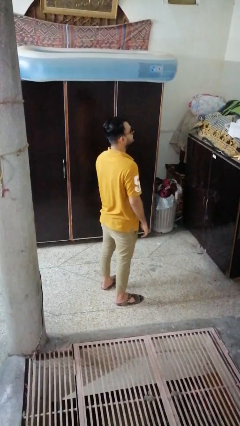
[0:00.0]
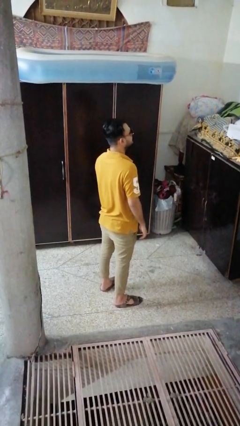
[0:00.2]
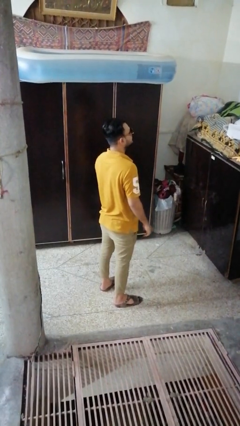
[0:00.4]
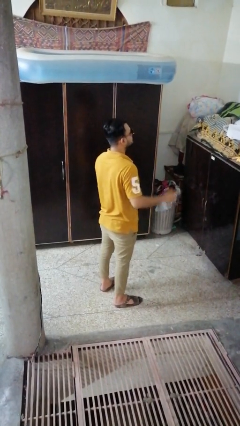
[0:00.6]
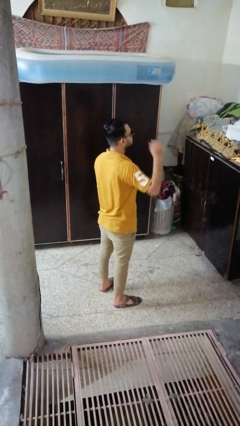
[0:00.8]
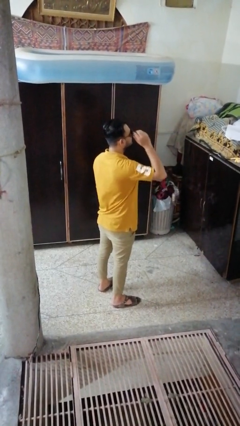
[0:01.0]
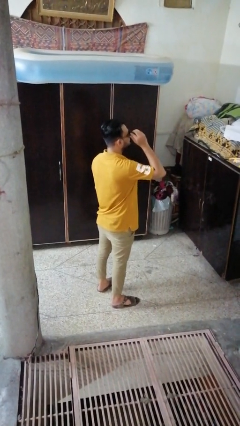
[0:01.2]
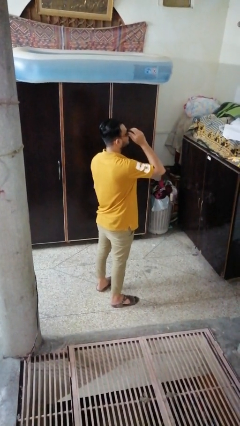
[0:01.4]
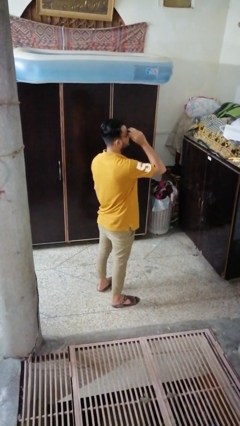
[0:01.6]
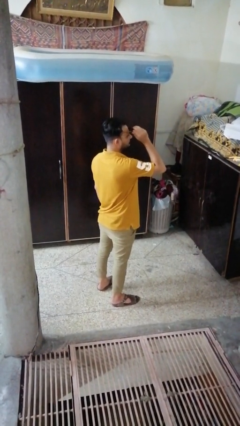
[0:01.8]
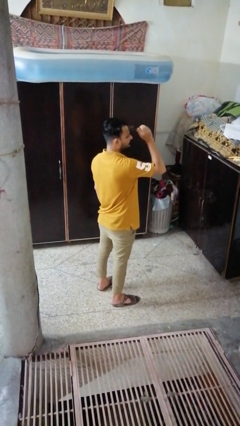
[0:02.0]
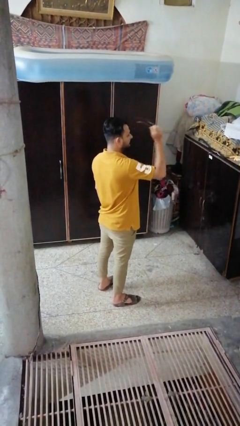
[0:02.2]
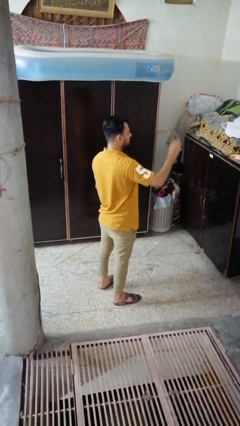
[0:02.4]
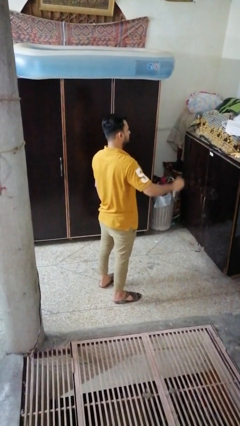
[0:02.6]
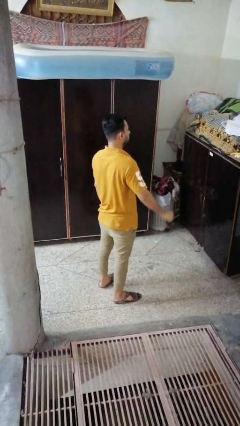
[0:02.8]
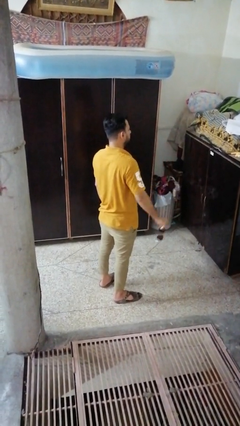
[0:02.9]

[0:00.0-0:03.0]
person takes off sunglasses

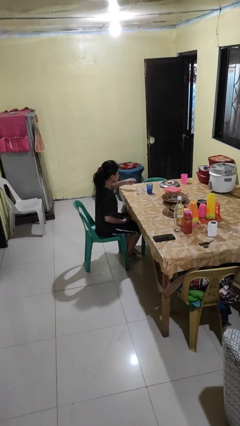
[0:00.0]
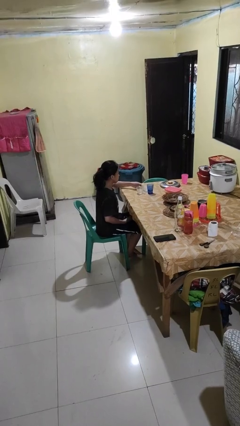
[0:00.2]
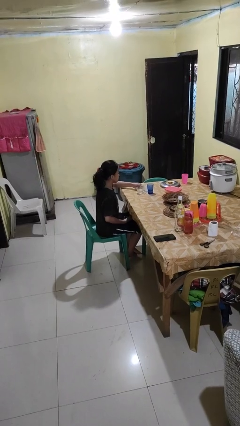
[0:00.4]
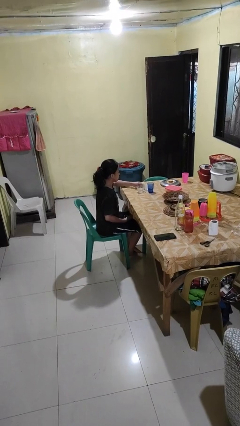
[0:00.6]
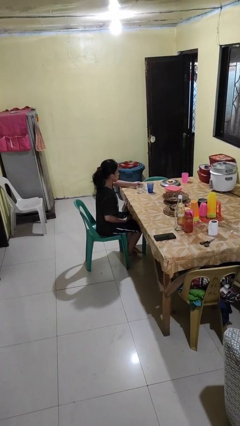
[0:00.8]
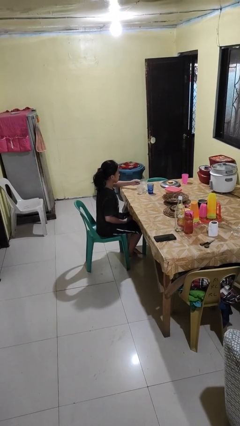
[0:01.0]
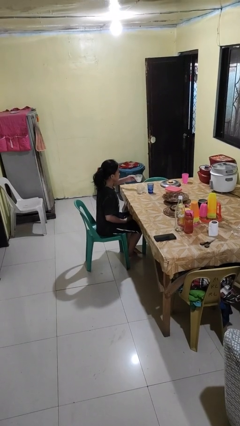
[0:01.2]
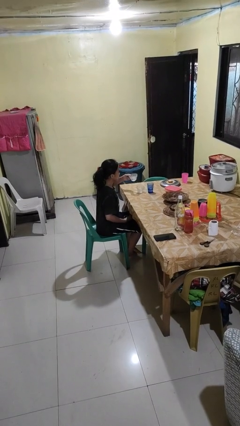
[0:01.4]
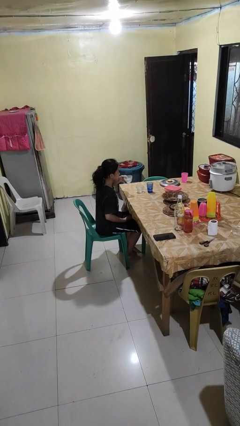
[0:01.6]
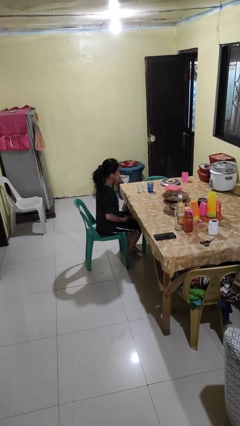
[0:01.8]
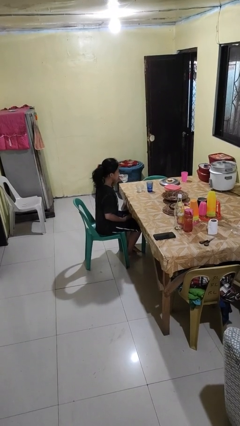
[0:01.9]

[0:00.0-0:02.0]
person picks up object from table

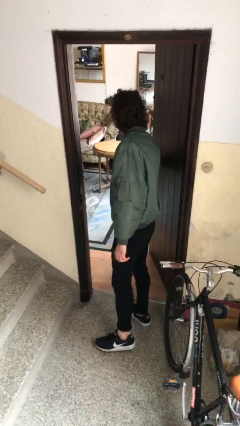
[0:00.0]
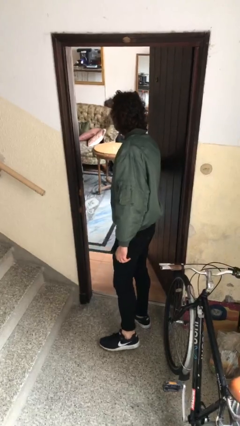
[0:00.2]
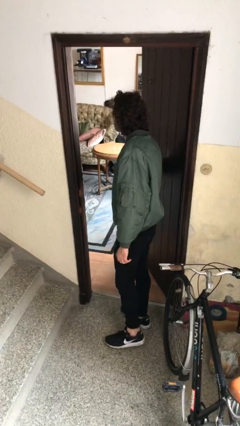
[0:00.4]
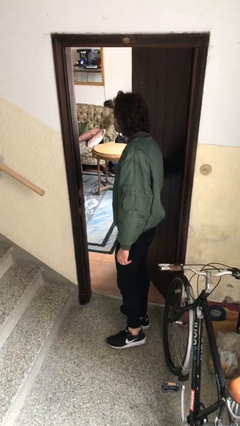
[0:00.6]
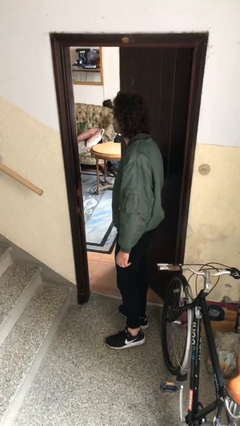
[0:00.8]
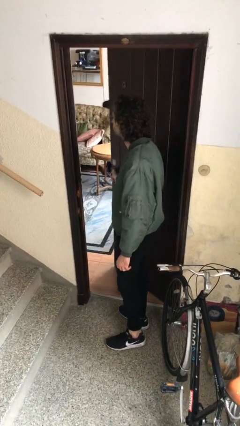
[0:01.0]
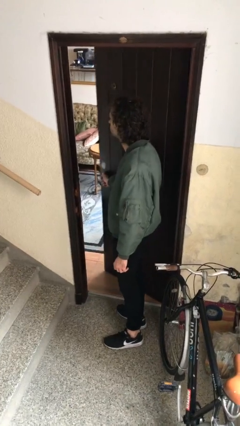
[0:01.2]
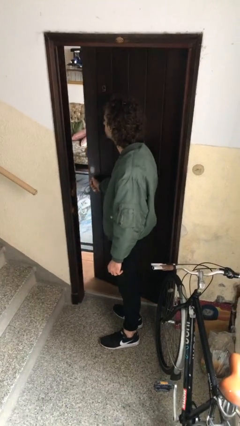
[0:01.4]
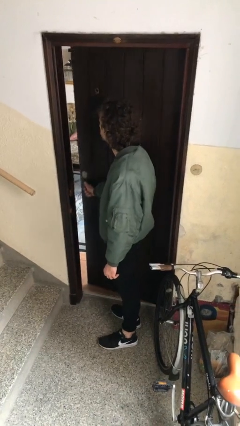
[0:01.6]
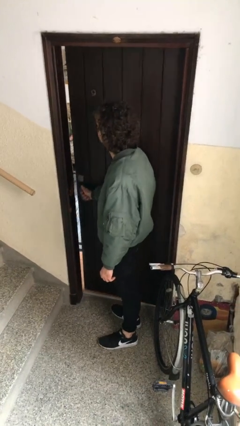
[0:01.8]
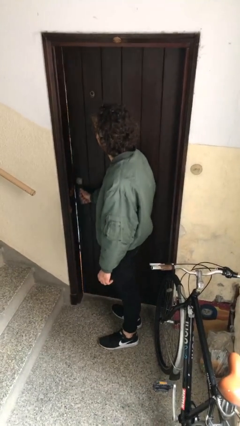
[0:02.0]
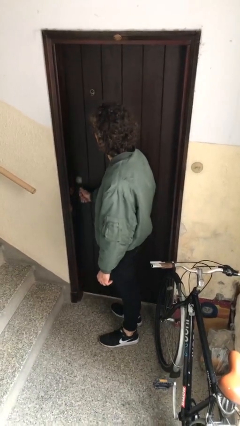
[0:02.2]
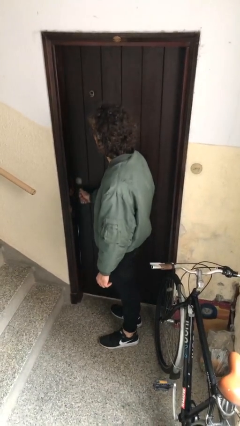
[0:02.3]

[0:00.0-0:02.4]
person closes facility door

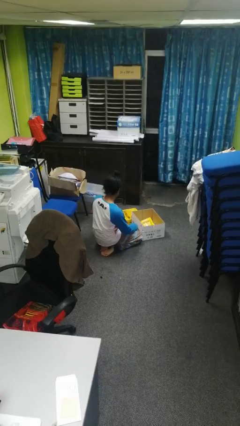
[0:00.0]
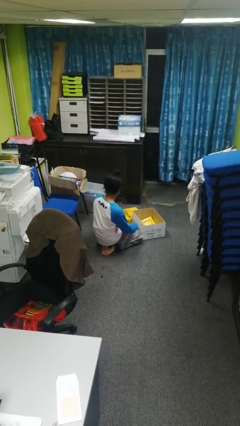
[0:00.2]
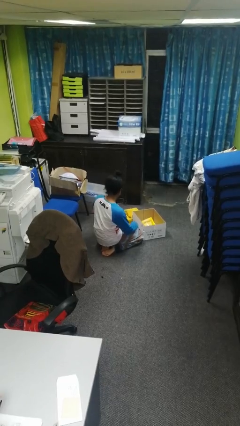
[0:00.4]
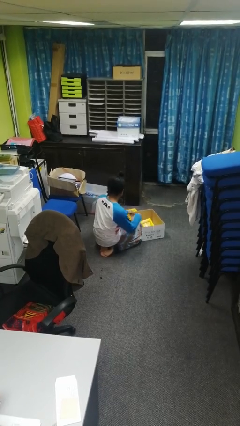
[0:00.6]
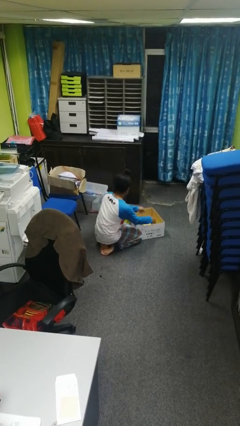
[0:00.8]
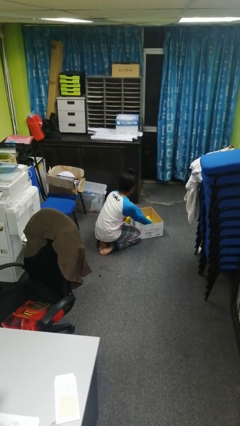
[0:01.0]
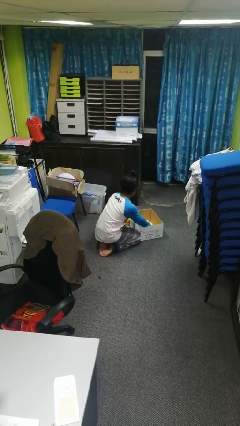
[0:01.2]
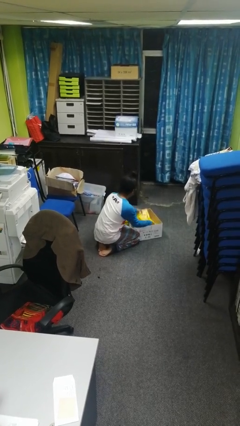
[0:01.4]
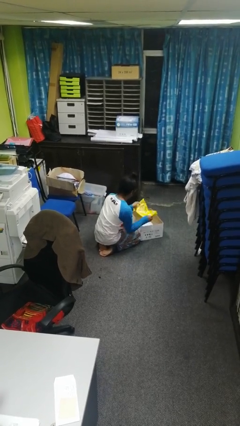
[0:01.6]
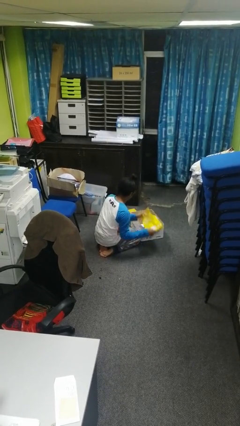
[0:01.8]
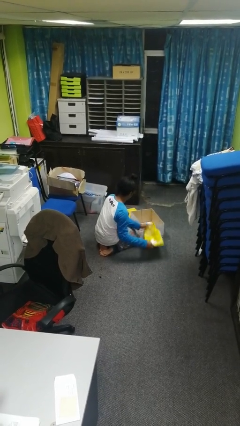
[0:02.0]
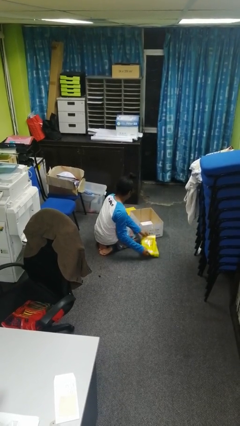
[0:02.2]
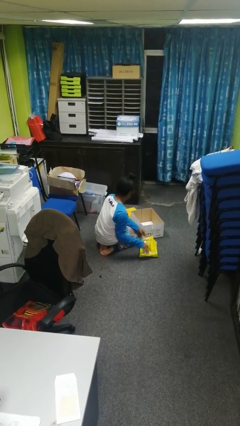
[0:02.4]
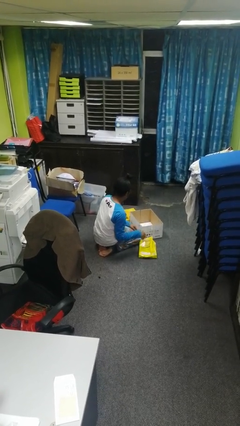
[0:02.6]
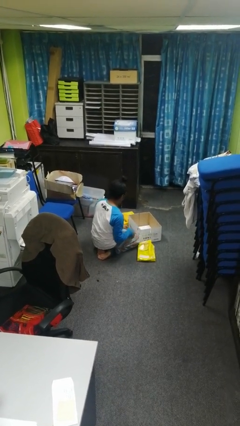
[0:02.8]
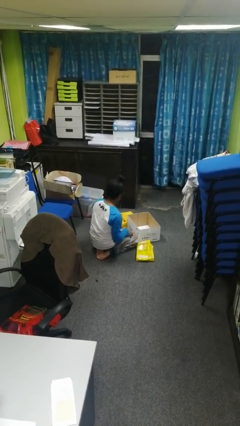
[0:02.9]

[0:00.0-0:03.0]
person takes object from box

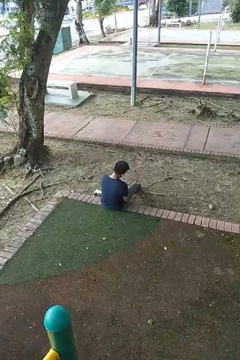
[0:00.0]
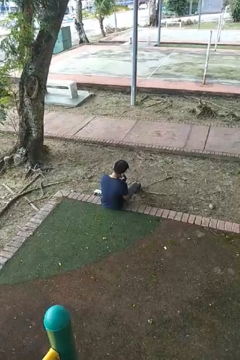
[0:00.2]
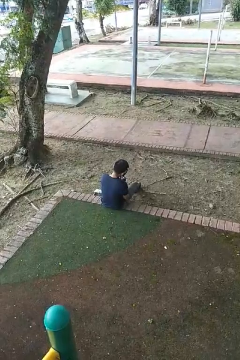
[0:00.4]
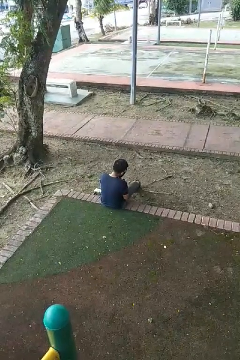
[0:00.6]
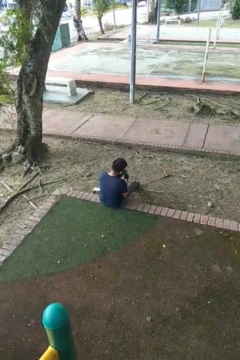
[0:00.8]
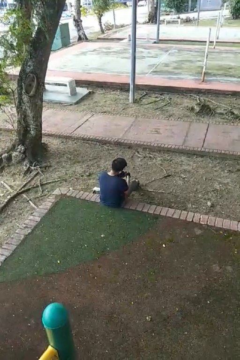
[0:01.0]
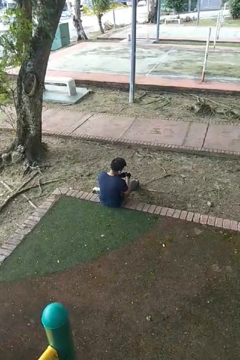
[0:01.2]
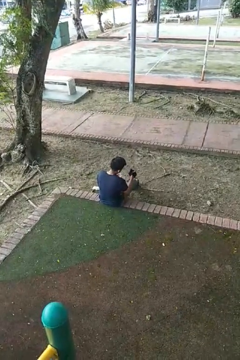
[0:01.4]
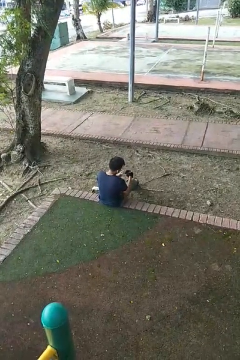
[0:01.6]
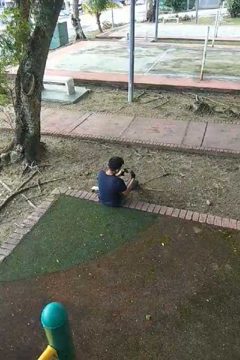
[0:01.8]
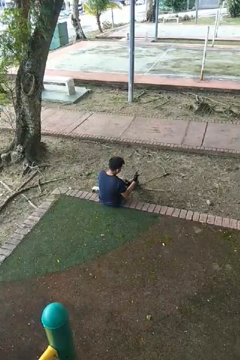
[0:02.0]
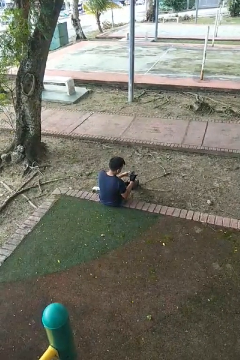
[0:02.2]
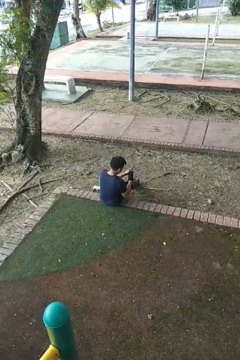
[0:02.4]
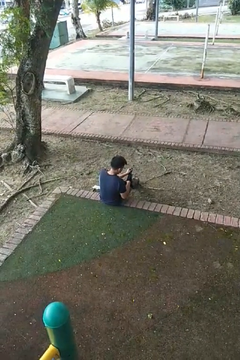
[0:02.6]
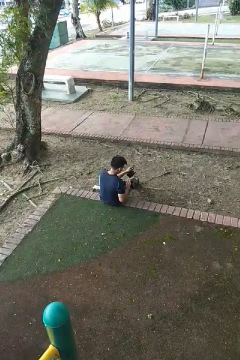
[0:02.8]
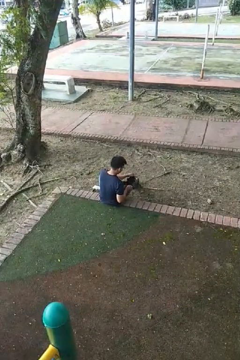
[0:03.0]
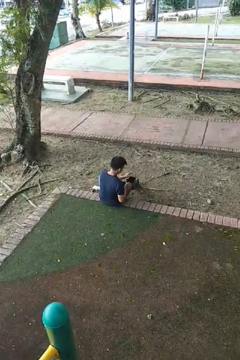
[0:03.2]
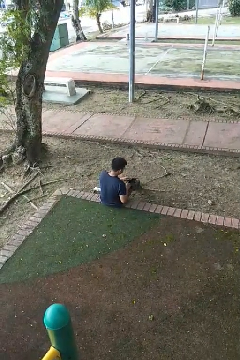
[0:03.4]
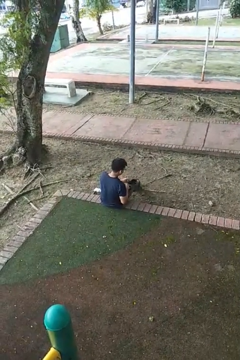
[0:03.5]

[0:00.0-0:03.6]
person takes off gloves

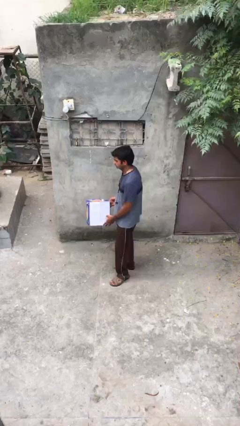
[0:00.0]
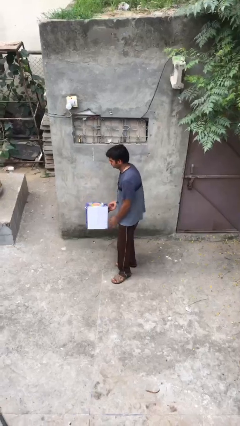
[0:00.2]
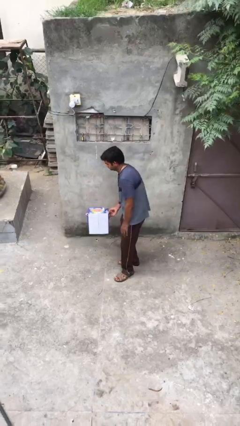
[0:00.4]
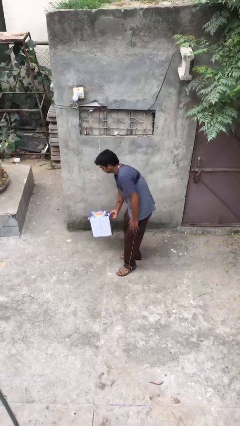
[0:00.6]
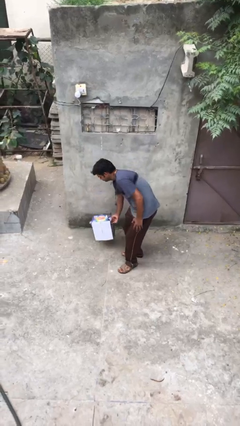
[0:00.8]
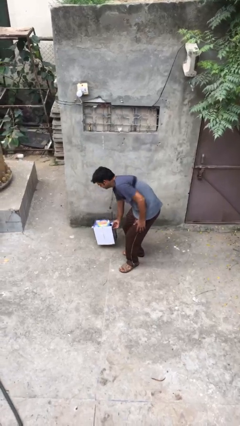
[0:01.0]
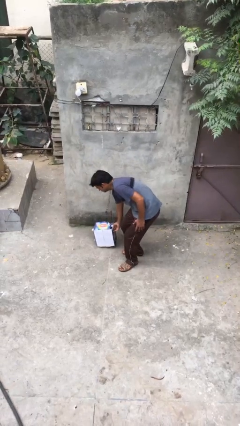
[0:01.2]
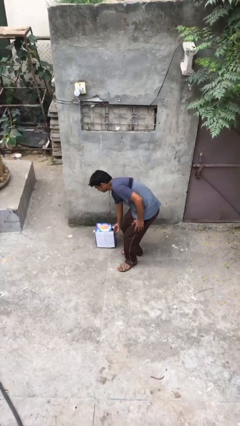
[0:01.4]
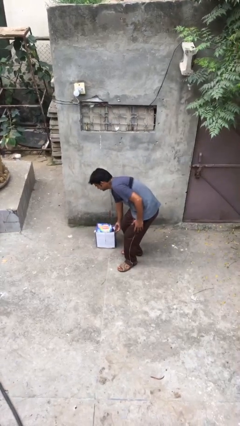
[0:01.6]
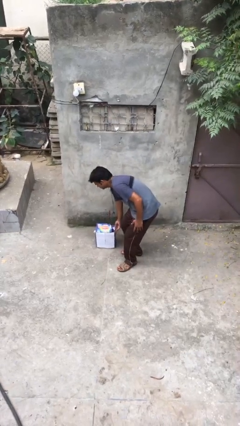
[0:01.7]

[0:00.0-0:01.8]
person puts down object on floor

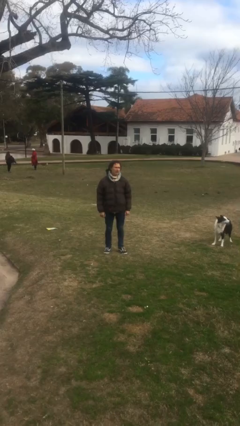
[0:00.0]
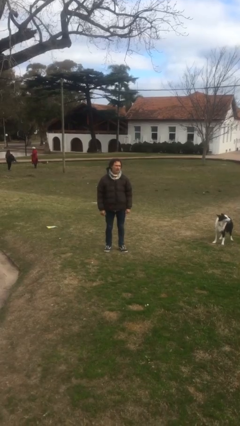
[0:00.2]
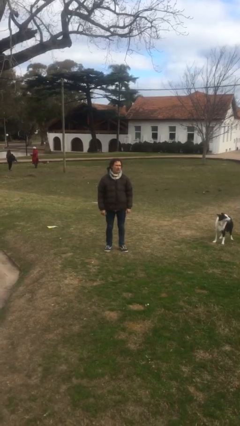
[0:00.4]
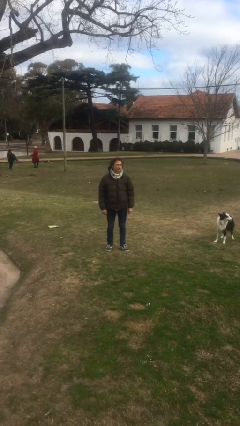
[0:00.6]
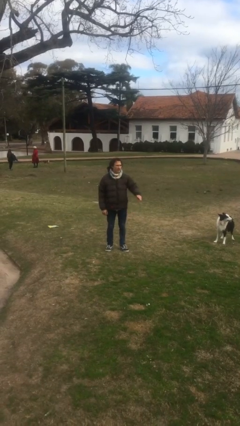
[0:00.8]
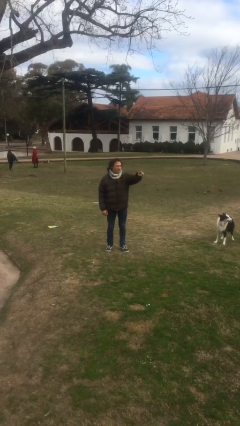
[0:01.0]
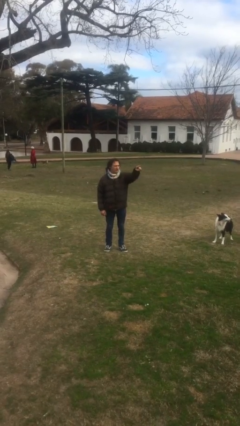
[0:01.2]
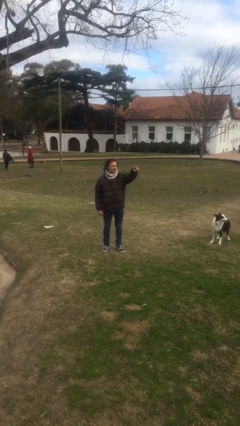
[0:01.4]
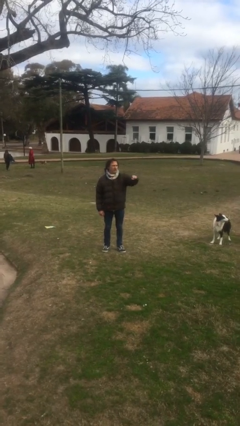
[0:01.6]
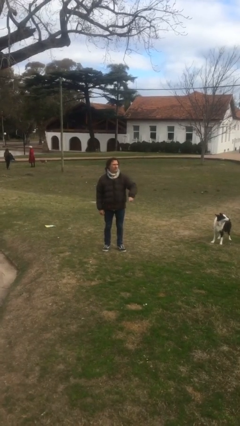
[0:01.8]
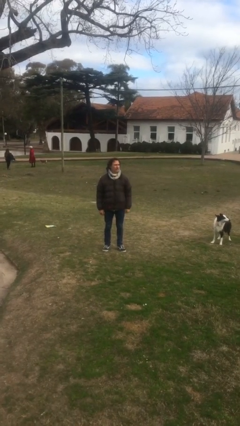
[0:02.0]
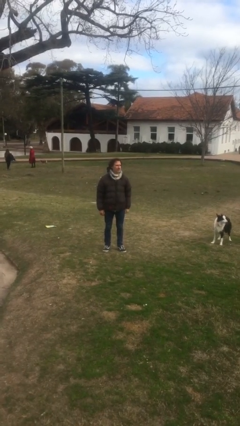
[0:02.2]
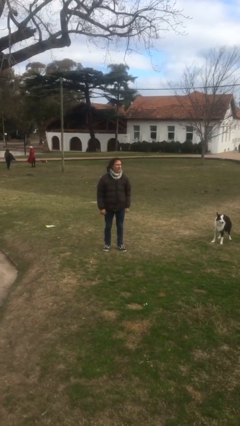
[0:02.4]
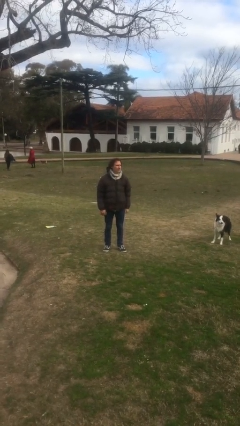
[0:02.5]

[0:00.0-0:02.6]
person points at person
